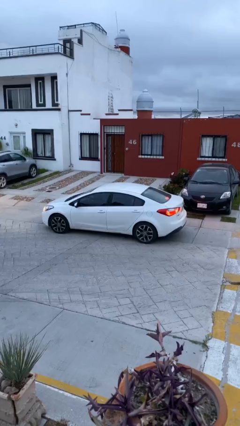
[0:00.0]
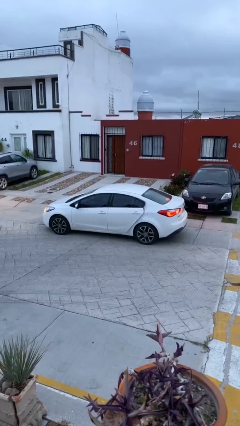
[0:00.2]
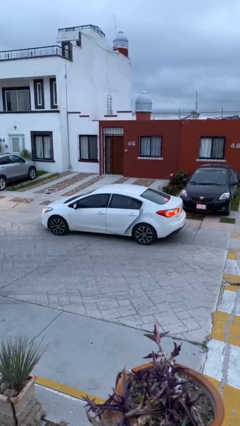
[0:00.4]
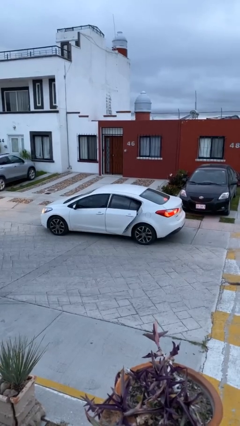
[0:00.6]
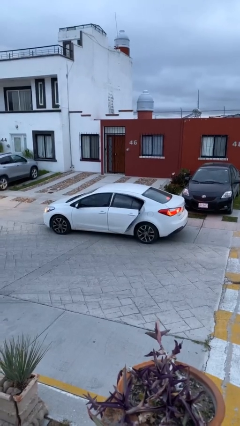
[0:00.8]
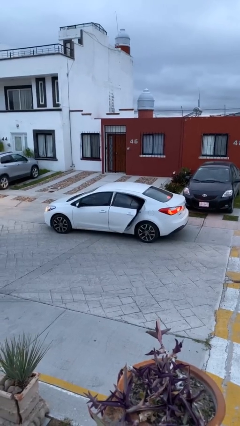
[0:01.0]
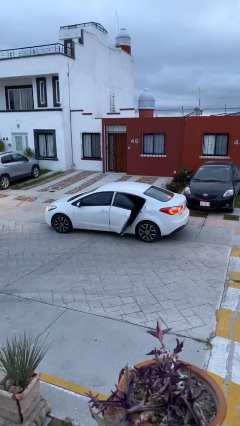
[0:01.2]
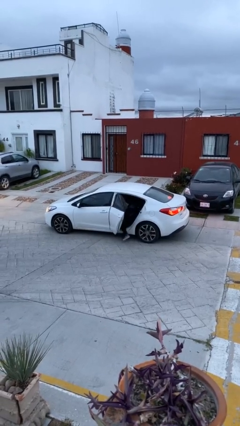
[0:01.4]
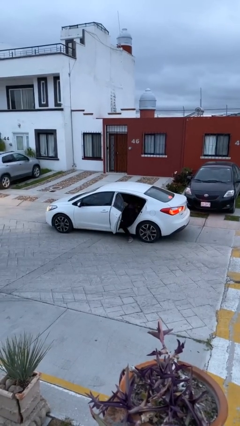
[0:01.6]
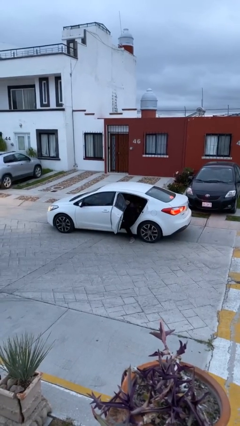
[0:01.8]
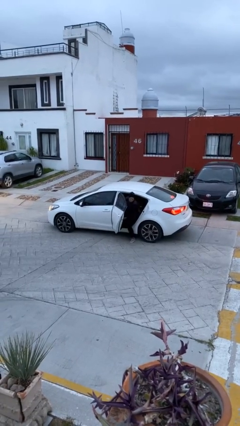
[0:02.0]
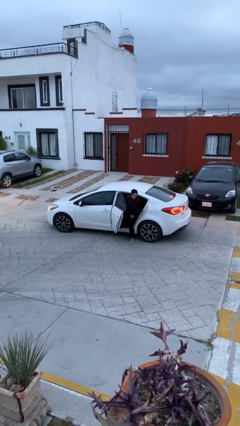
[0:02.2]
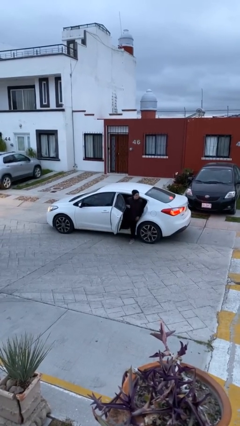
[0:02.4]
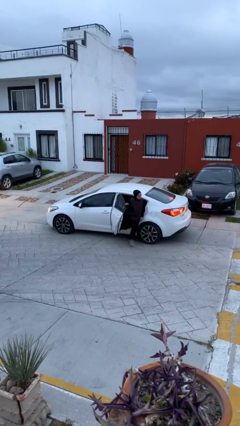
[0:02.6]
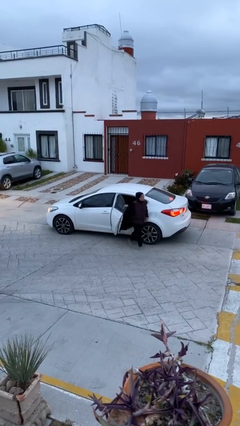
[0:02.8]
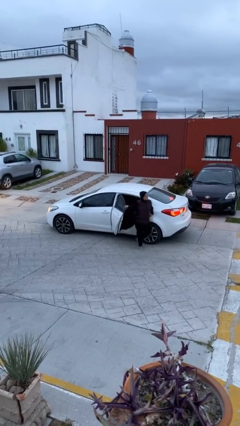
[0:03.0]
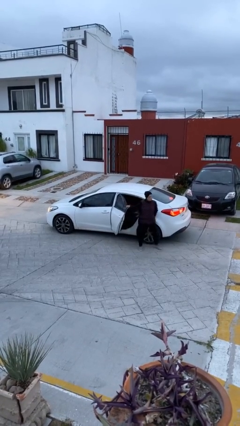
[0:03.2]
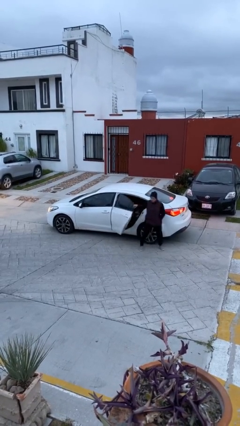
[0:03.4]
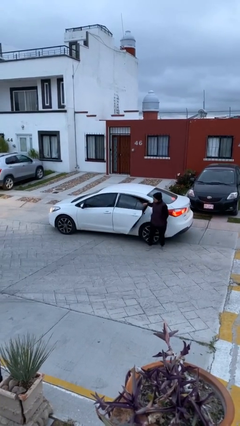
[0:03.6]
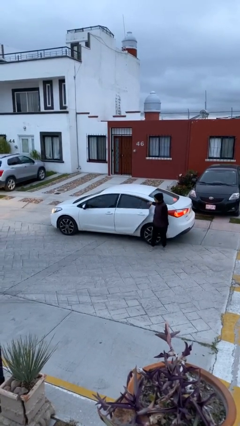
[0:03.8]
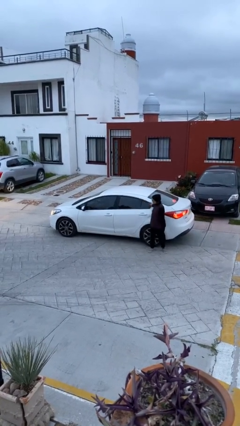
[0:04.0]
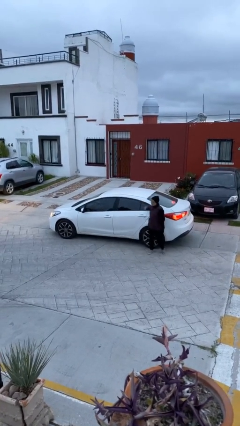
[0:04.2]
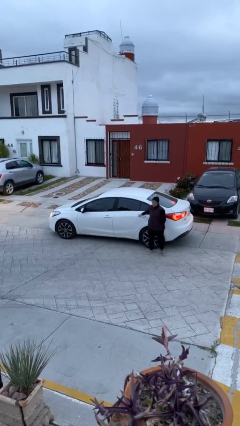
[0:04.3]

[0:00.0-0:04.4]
car drops off person

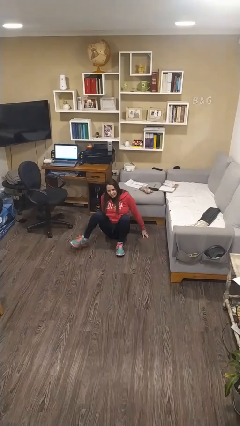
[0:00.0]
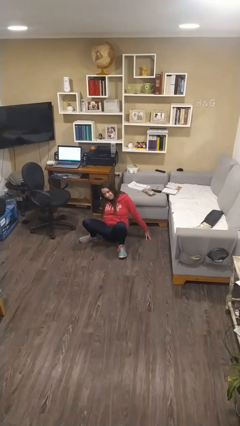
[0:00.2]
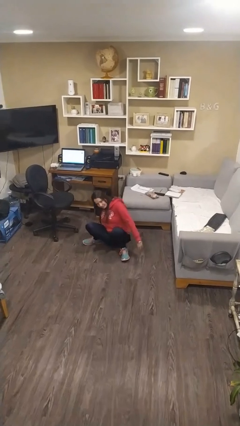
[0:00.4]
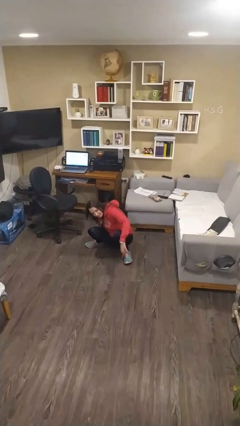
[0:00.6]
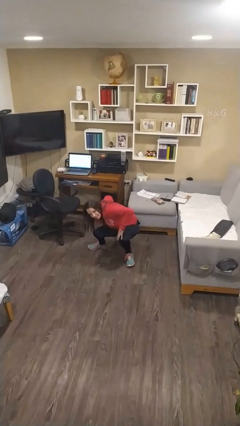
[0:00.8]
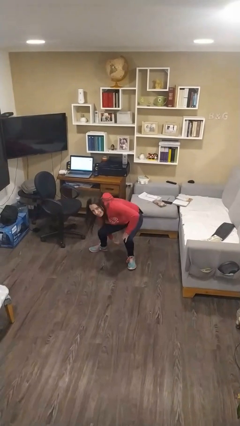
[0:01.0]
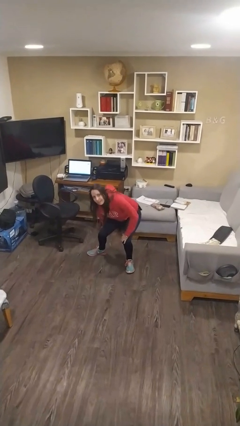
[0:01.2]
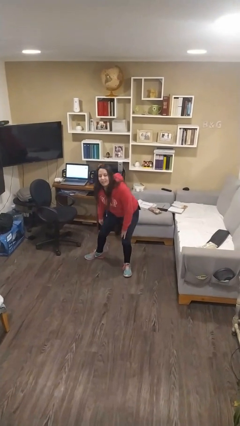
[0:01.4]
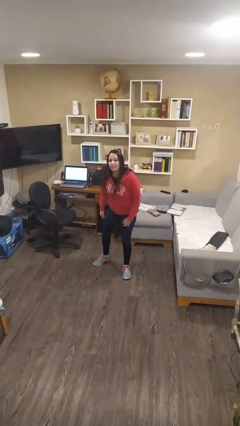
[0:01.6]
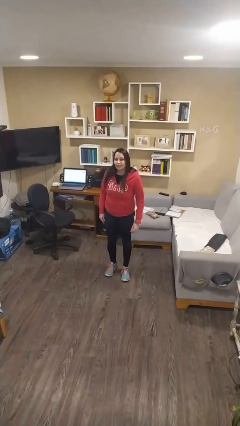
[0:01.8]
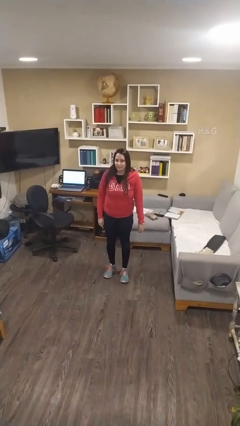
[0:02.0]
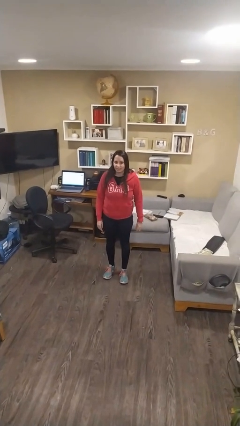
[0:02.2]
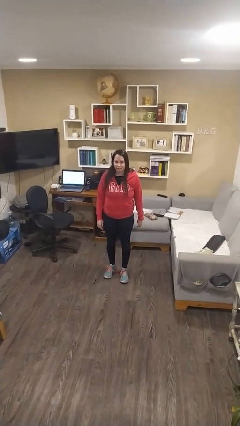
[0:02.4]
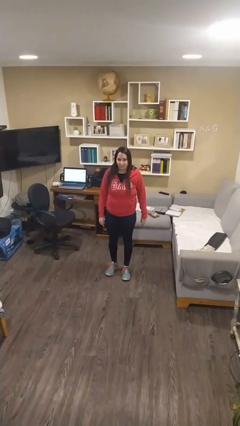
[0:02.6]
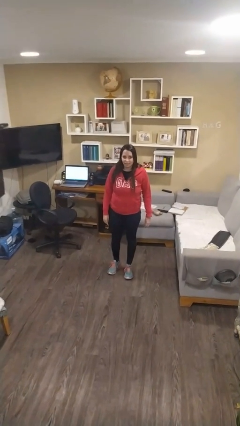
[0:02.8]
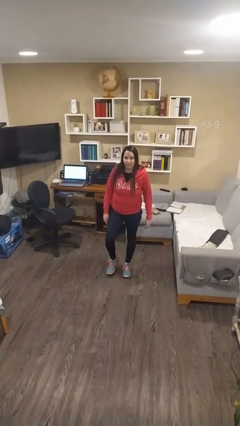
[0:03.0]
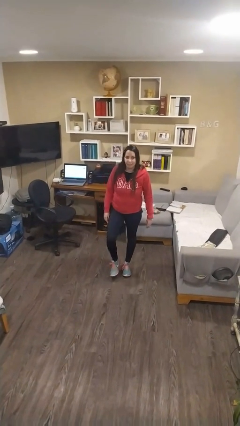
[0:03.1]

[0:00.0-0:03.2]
person stands up from floor

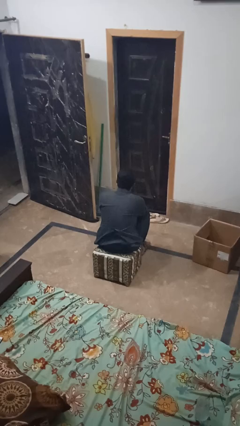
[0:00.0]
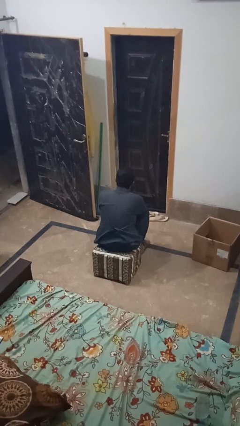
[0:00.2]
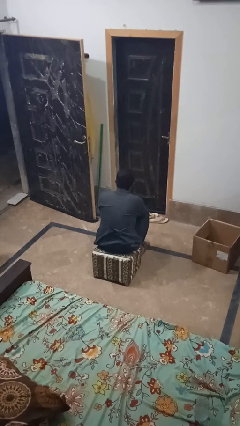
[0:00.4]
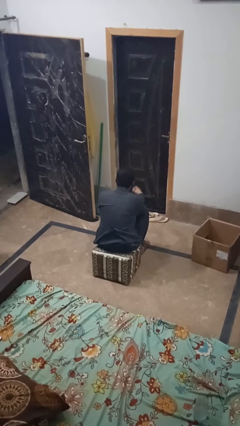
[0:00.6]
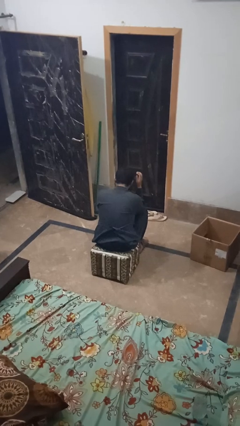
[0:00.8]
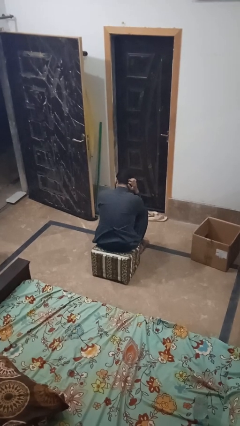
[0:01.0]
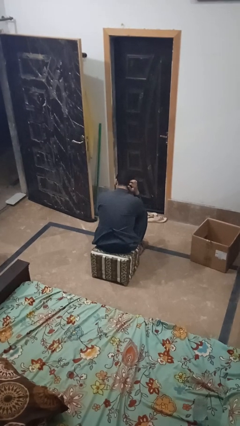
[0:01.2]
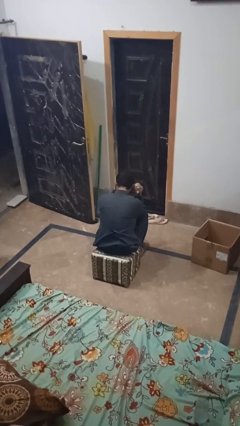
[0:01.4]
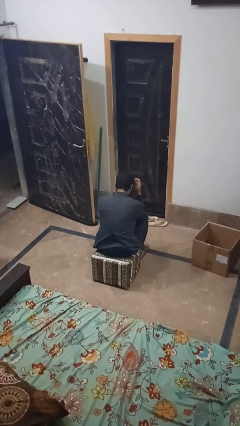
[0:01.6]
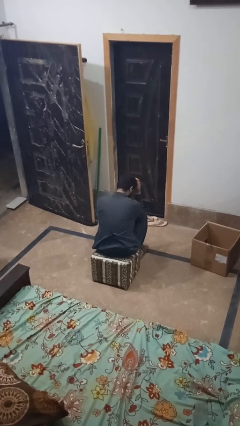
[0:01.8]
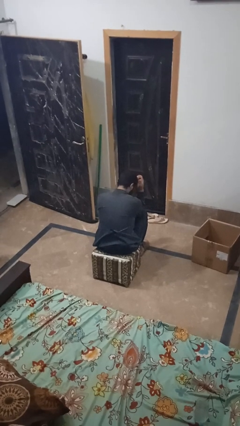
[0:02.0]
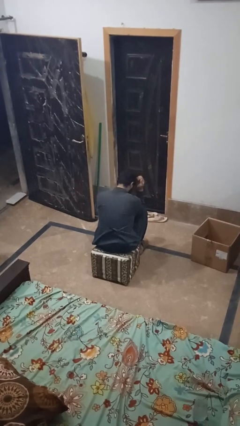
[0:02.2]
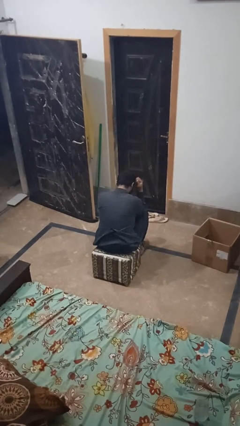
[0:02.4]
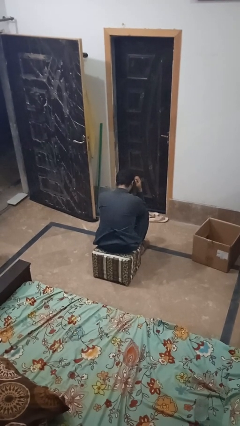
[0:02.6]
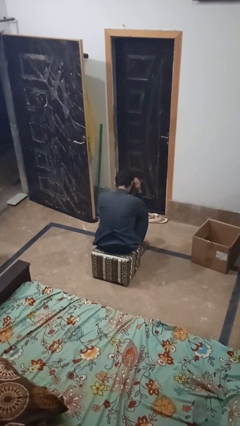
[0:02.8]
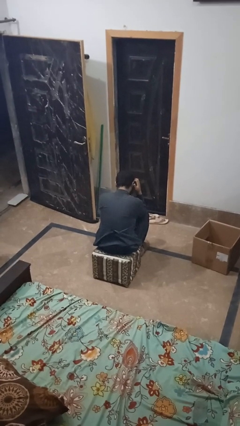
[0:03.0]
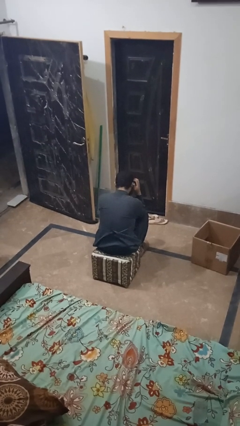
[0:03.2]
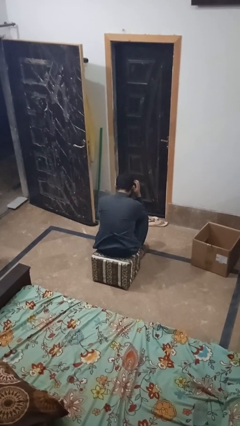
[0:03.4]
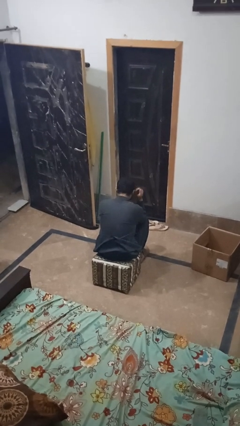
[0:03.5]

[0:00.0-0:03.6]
person strokes hair

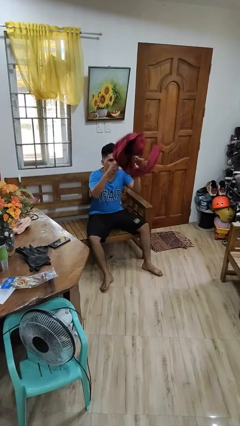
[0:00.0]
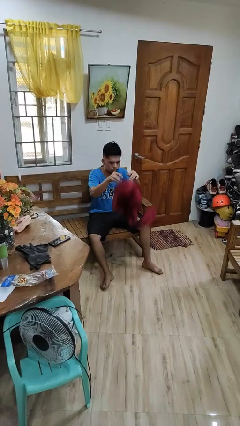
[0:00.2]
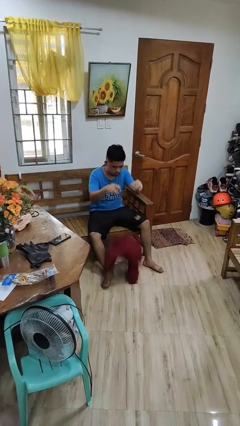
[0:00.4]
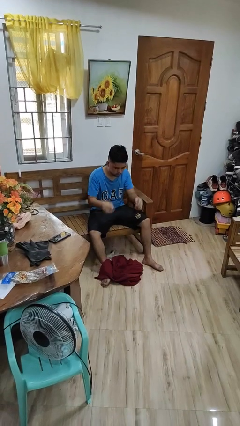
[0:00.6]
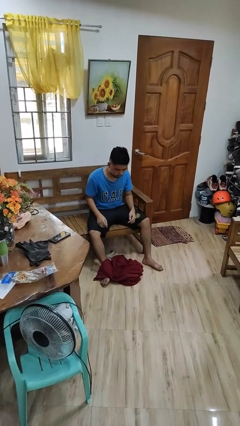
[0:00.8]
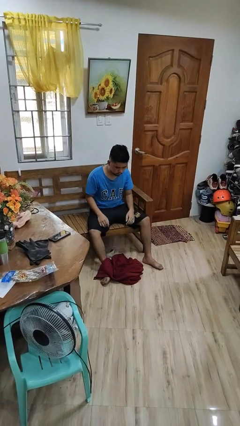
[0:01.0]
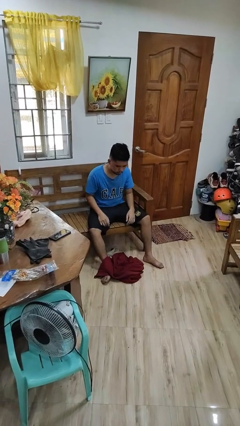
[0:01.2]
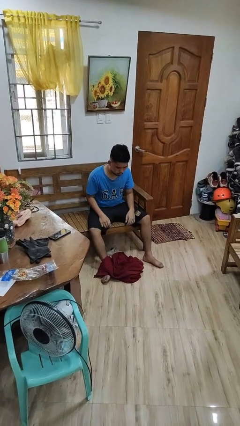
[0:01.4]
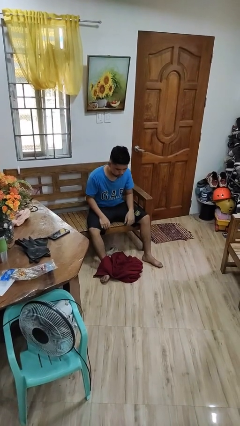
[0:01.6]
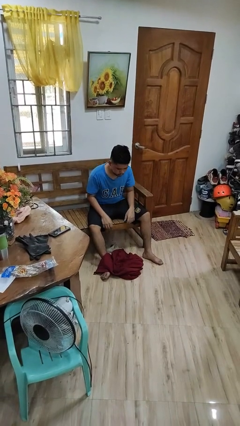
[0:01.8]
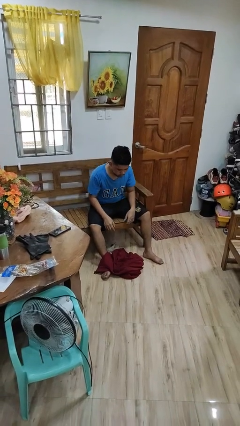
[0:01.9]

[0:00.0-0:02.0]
person drops object

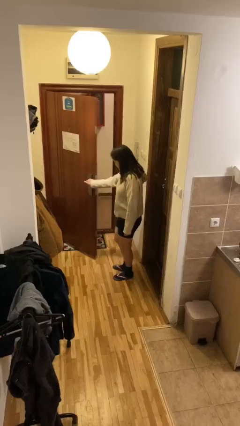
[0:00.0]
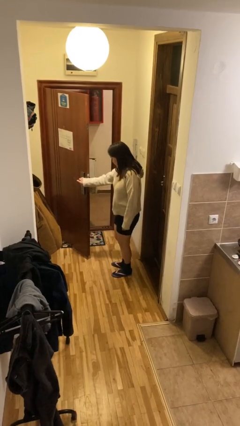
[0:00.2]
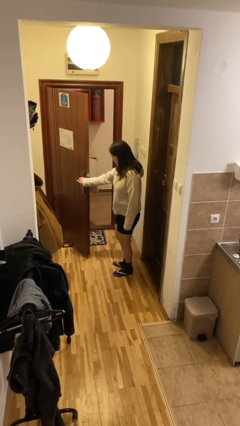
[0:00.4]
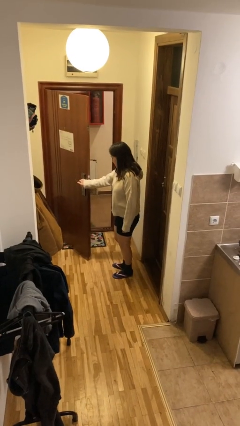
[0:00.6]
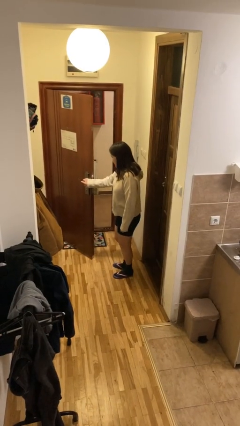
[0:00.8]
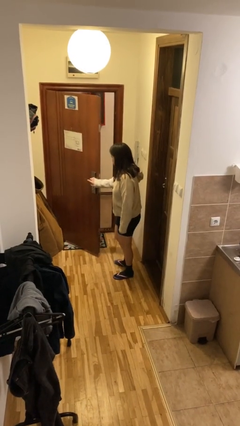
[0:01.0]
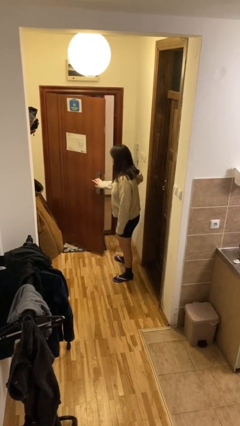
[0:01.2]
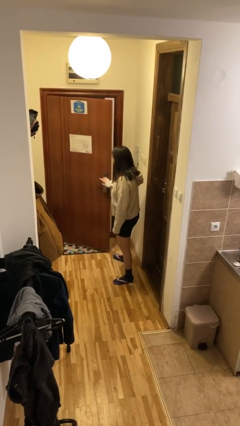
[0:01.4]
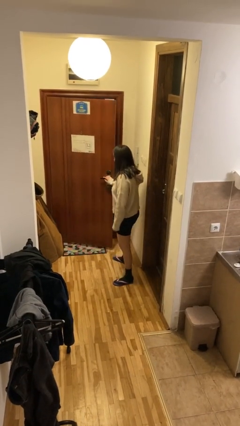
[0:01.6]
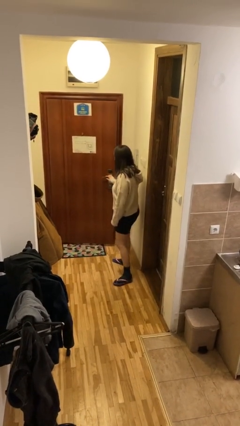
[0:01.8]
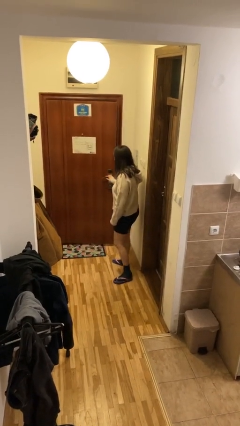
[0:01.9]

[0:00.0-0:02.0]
person closes facility door

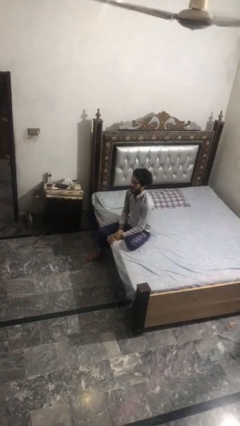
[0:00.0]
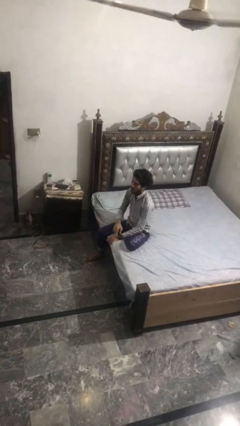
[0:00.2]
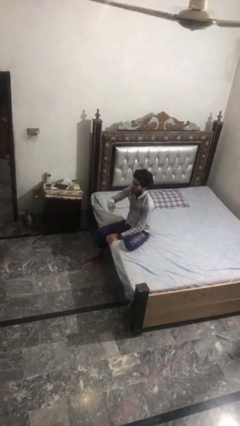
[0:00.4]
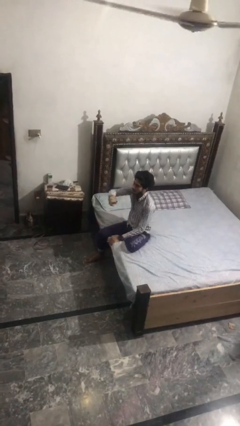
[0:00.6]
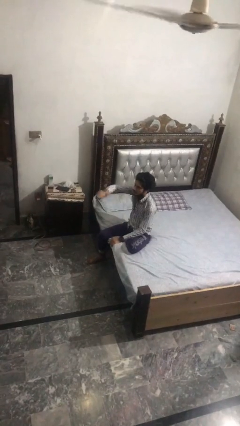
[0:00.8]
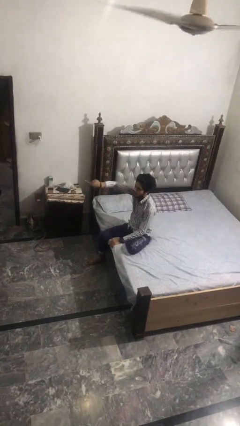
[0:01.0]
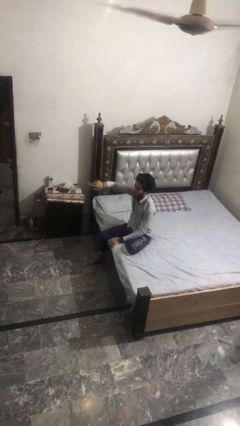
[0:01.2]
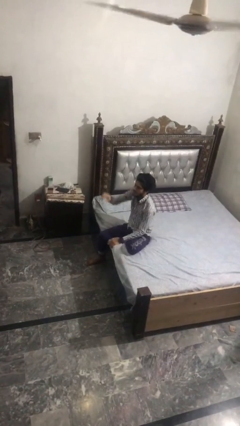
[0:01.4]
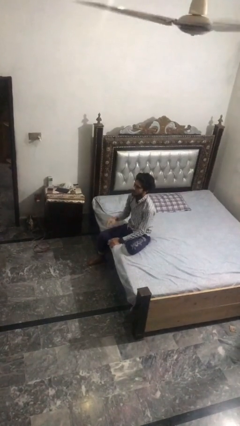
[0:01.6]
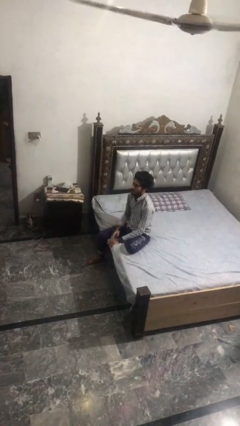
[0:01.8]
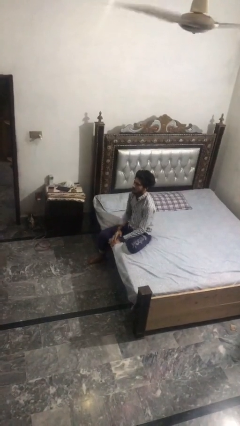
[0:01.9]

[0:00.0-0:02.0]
person gestures swipe right
